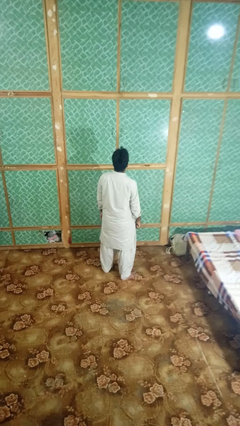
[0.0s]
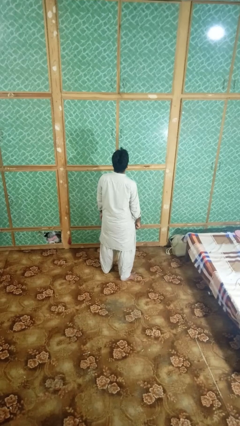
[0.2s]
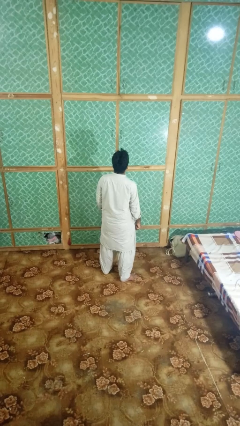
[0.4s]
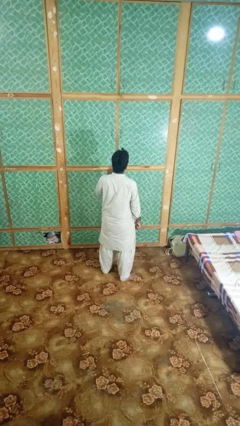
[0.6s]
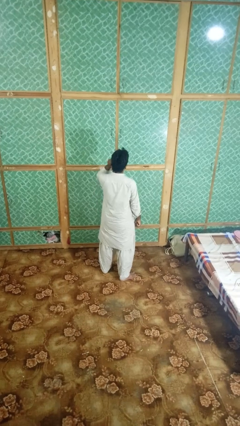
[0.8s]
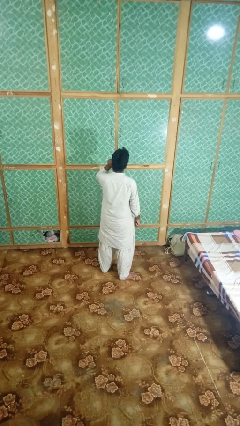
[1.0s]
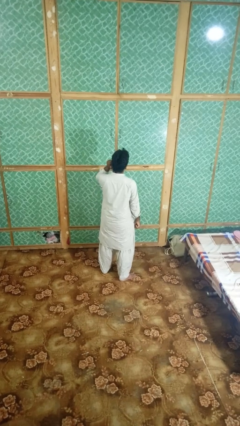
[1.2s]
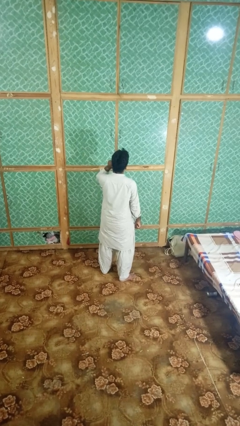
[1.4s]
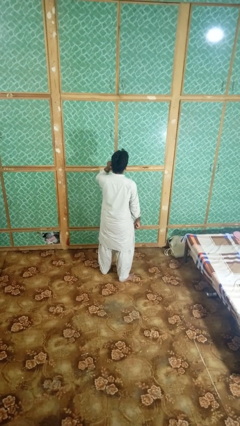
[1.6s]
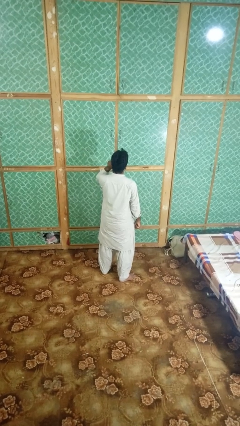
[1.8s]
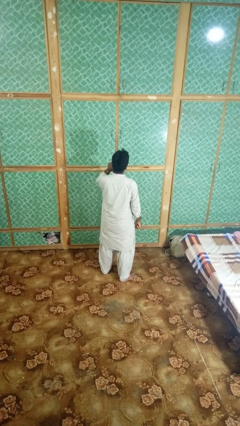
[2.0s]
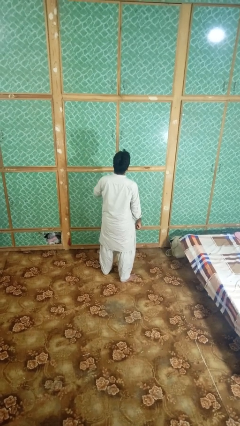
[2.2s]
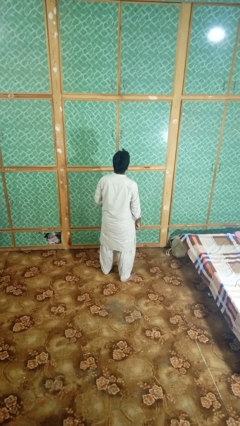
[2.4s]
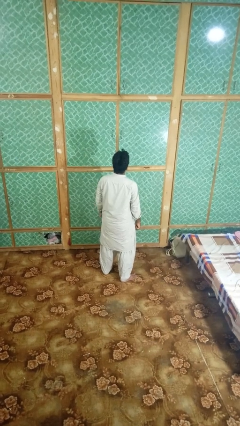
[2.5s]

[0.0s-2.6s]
person touches earlobe

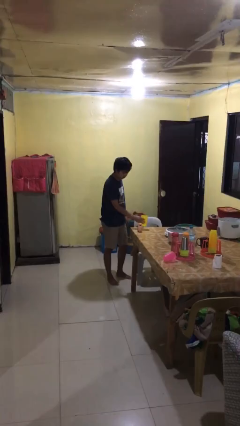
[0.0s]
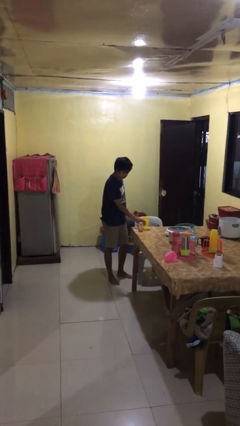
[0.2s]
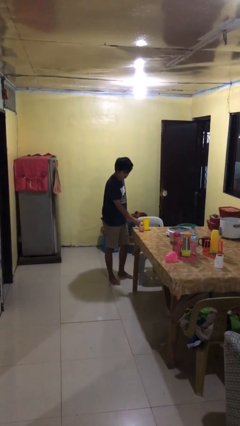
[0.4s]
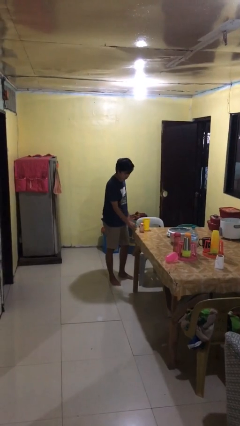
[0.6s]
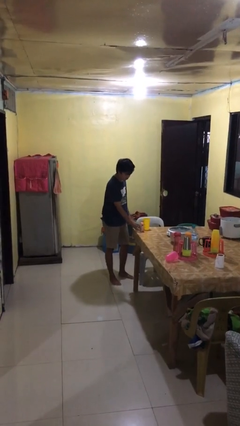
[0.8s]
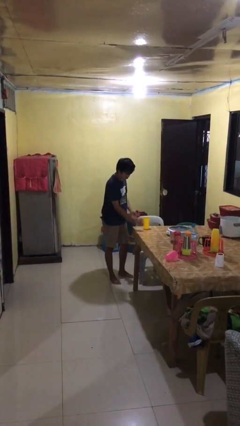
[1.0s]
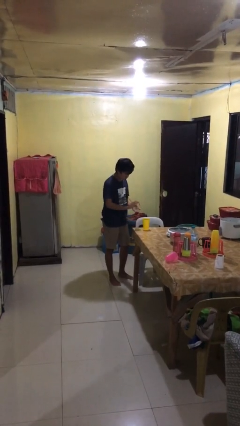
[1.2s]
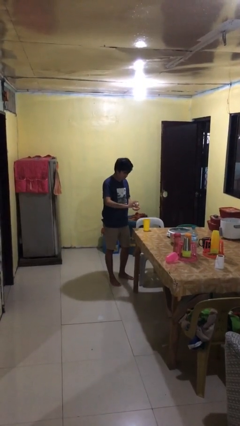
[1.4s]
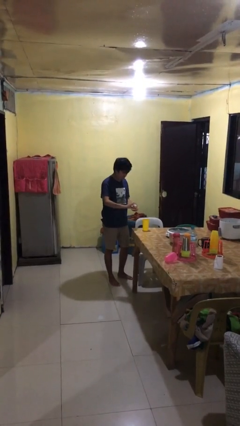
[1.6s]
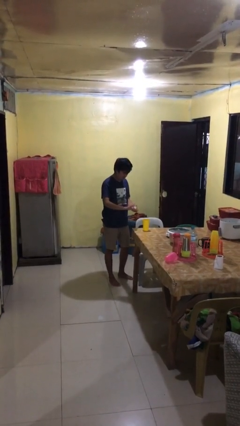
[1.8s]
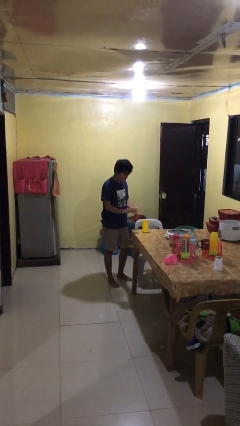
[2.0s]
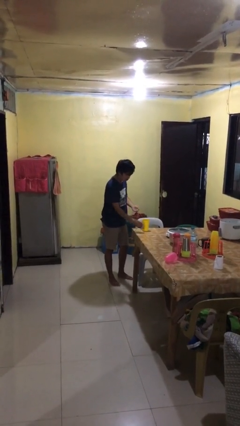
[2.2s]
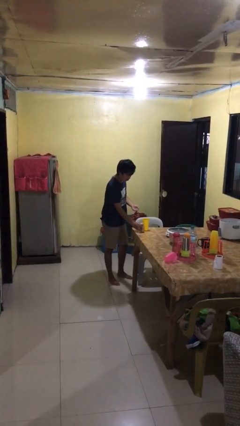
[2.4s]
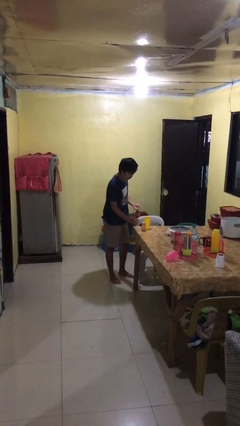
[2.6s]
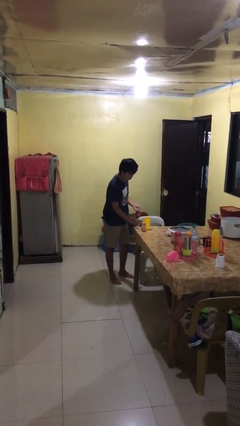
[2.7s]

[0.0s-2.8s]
person takes medicine pills

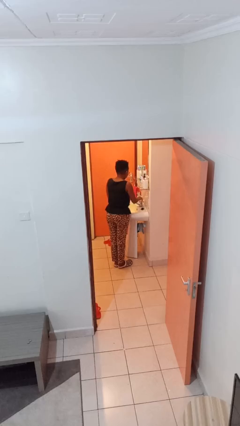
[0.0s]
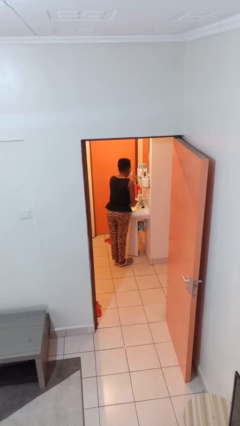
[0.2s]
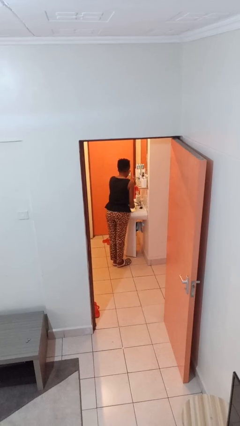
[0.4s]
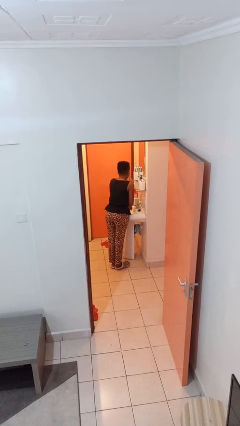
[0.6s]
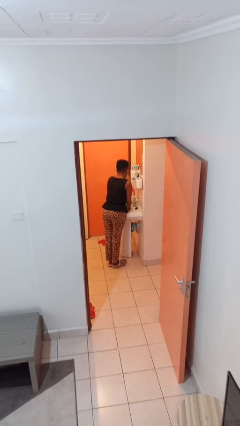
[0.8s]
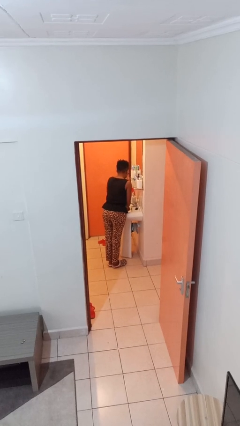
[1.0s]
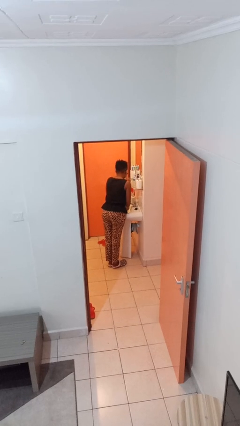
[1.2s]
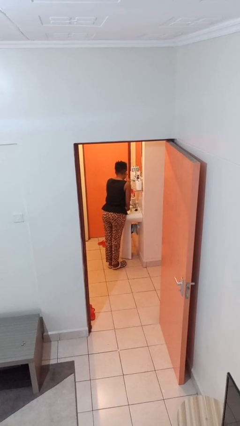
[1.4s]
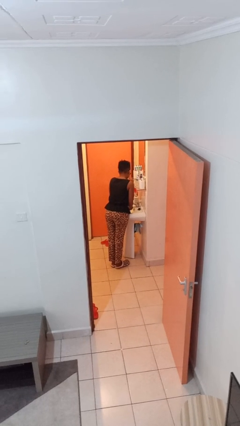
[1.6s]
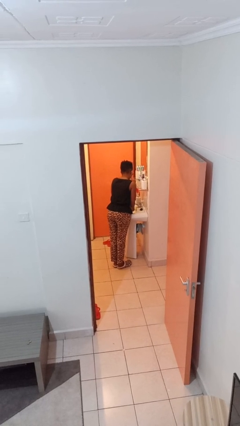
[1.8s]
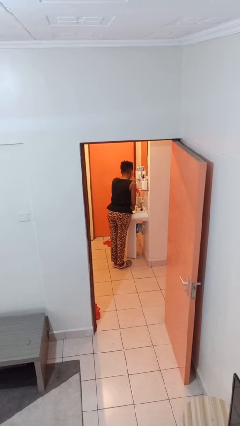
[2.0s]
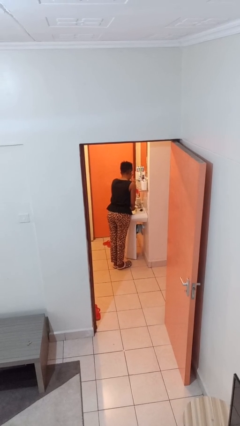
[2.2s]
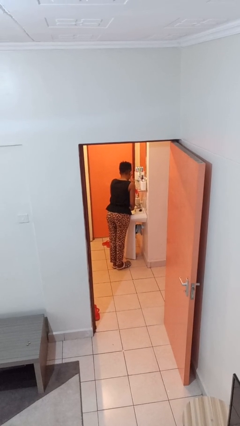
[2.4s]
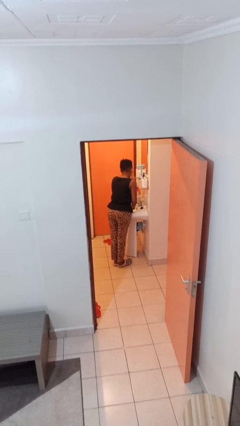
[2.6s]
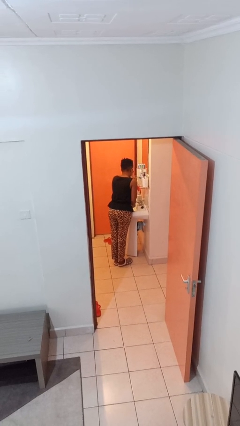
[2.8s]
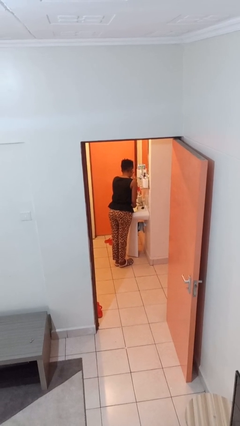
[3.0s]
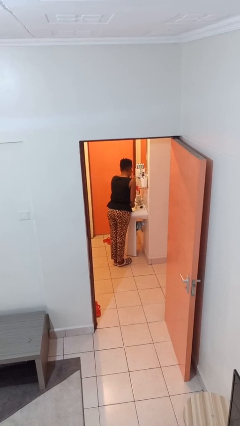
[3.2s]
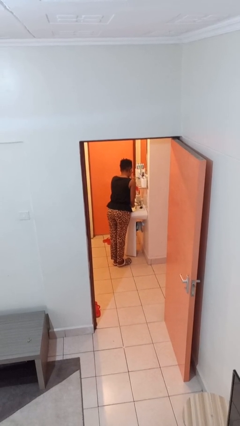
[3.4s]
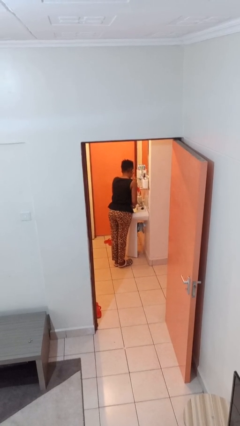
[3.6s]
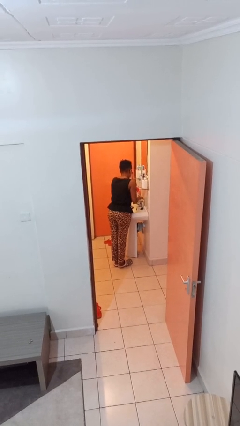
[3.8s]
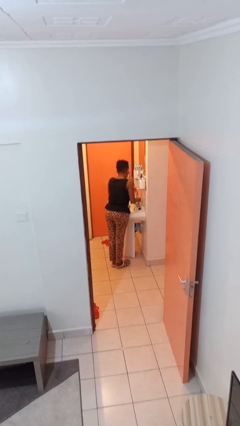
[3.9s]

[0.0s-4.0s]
person washes hands

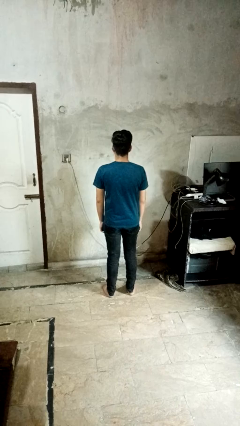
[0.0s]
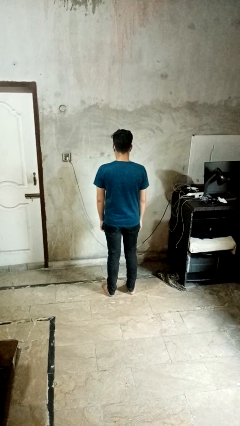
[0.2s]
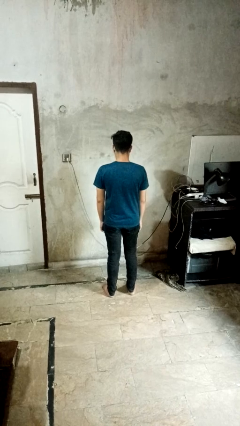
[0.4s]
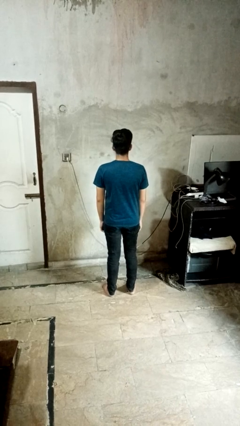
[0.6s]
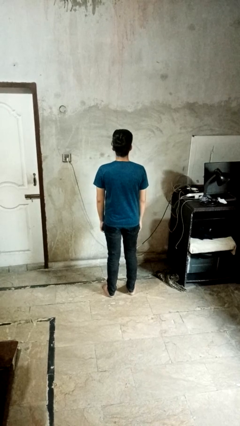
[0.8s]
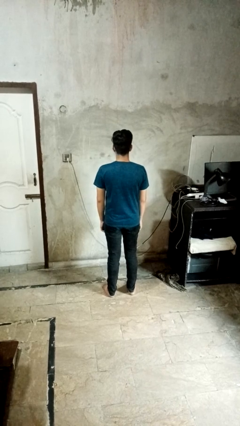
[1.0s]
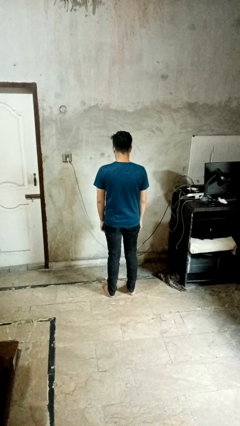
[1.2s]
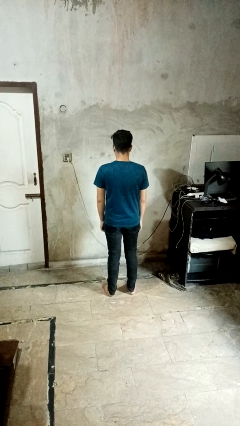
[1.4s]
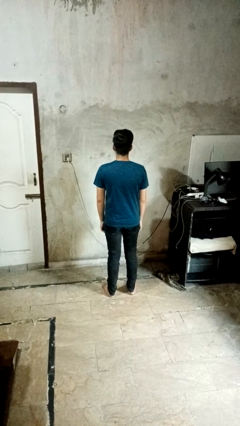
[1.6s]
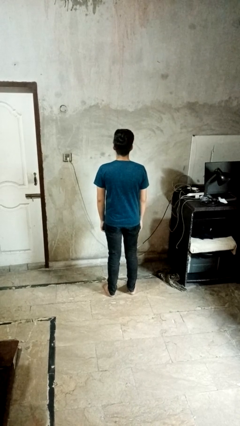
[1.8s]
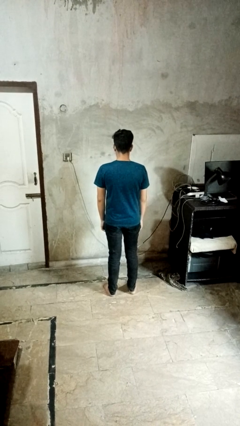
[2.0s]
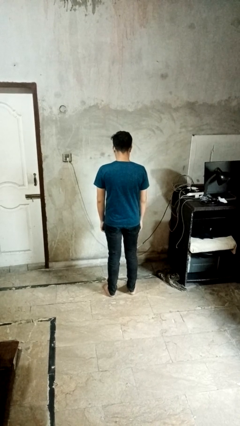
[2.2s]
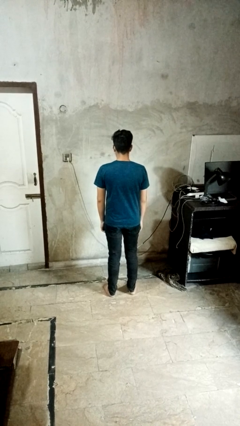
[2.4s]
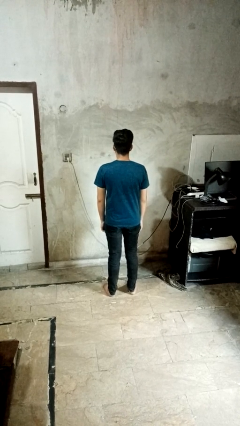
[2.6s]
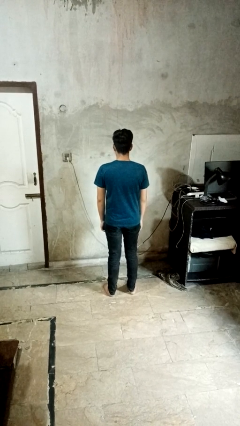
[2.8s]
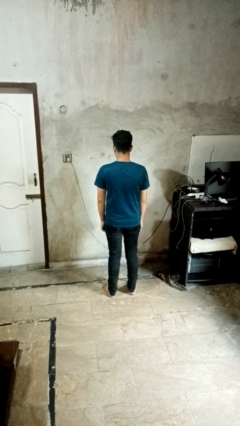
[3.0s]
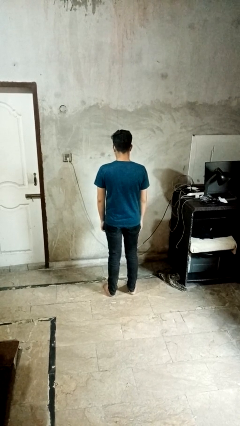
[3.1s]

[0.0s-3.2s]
person nods head

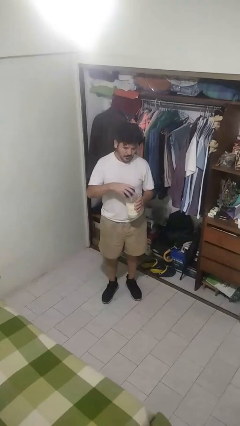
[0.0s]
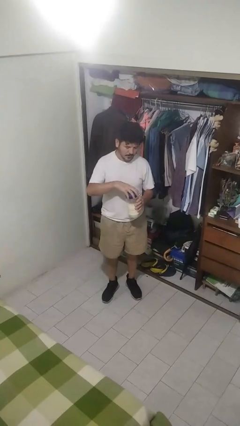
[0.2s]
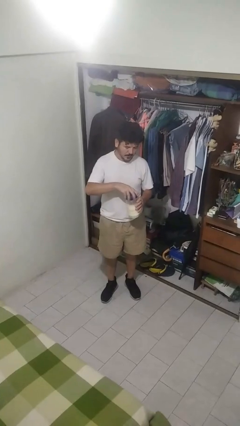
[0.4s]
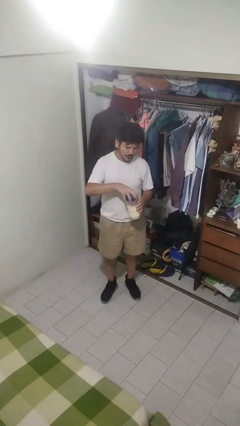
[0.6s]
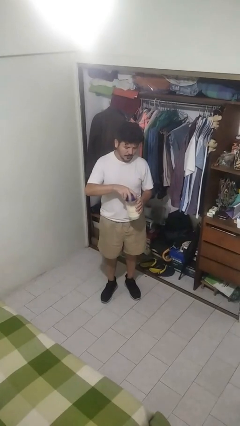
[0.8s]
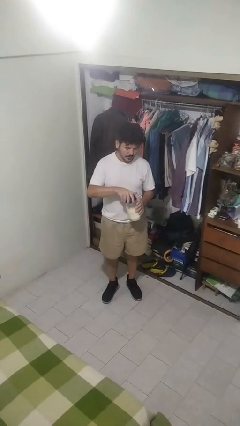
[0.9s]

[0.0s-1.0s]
person closes jar

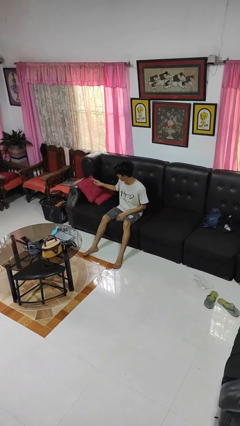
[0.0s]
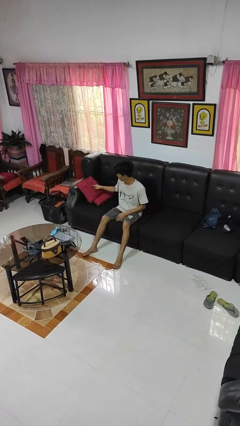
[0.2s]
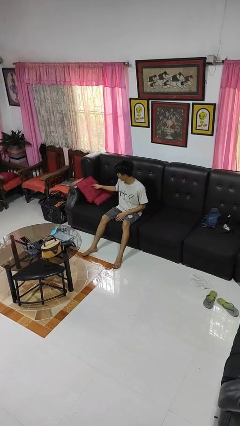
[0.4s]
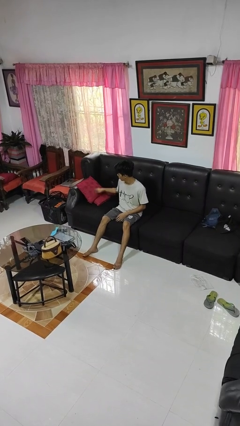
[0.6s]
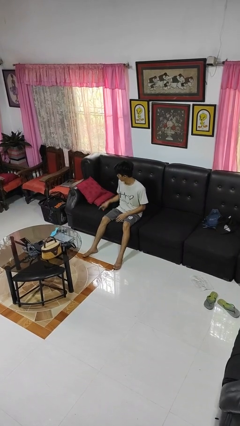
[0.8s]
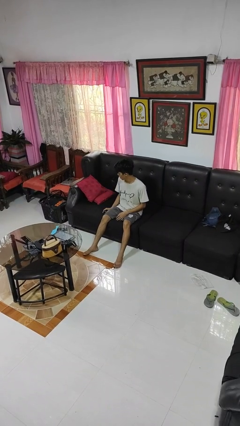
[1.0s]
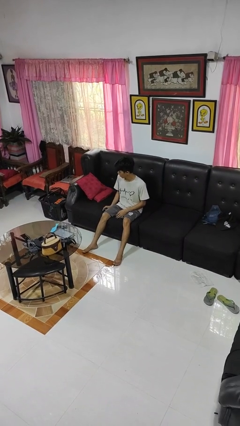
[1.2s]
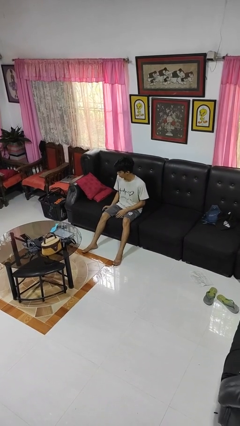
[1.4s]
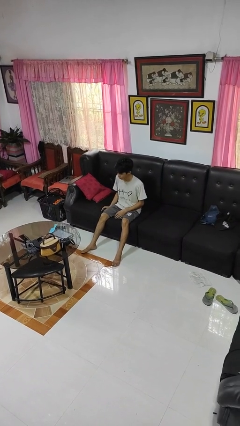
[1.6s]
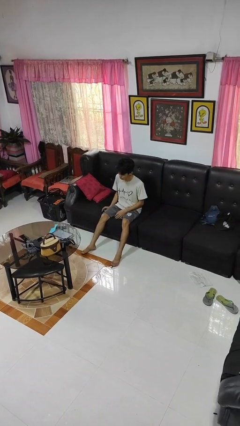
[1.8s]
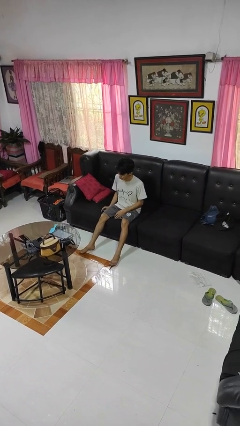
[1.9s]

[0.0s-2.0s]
person taps object with finger

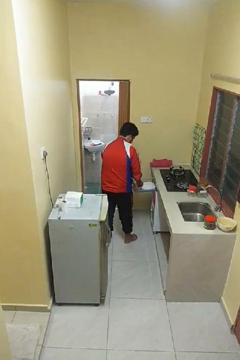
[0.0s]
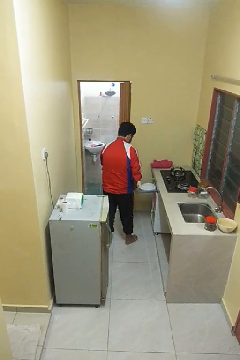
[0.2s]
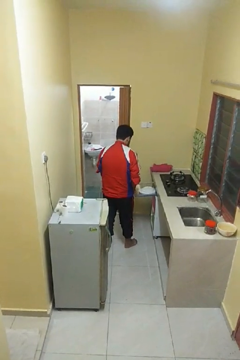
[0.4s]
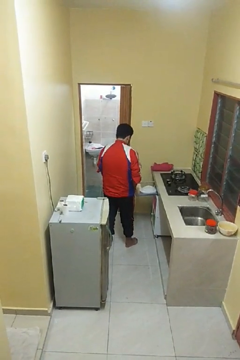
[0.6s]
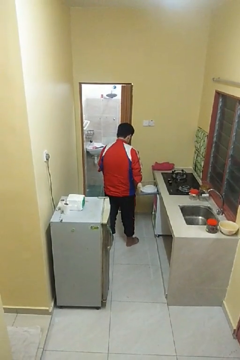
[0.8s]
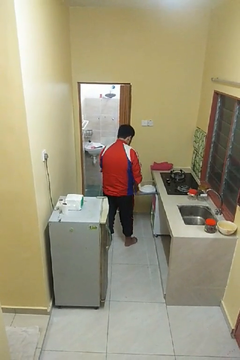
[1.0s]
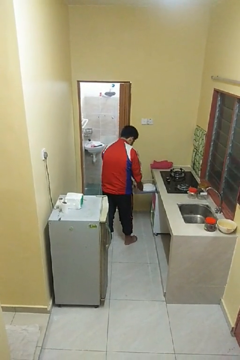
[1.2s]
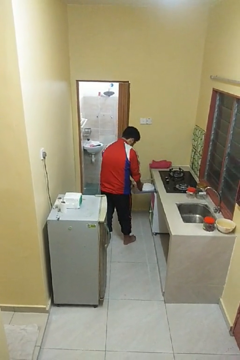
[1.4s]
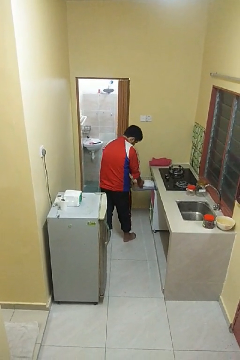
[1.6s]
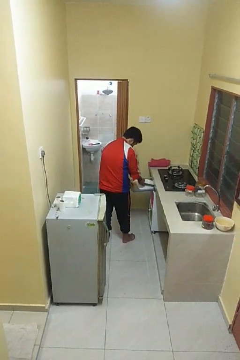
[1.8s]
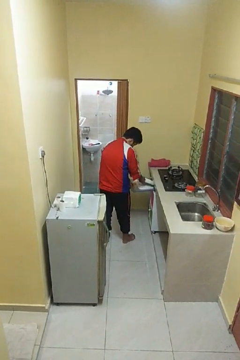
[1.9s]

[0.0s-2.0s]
person searches in kitchen drawer
